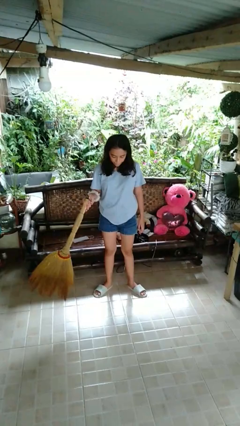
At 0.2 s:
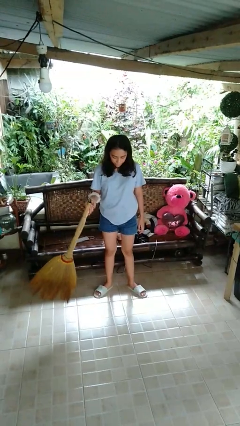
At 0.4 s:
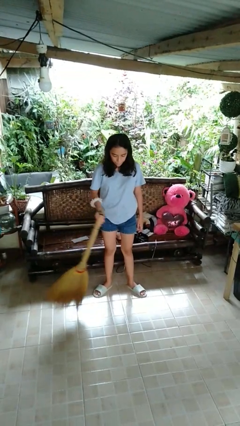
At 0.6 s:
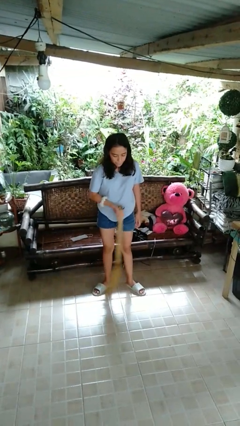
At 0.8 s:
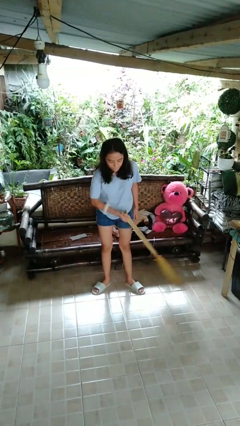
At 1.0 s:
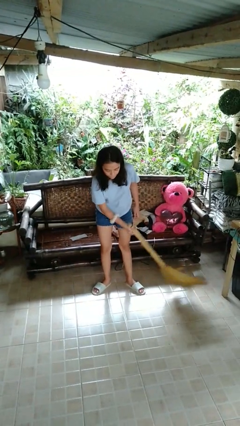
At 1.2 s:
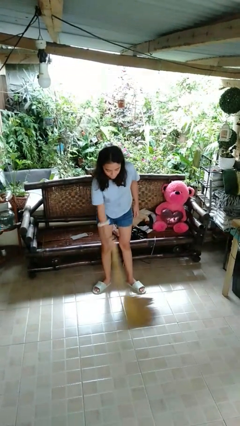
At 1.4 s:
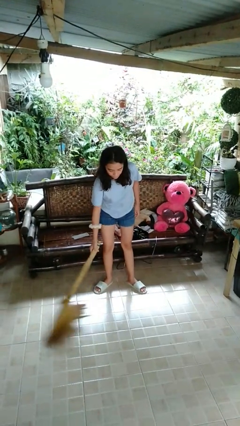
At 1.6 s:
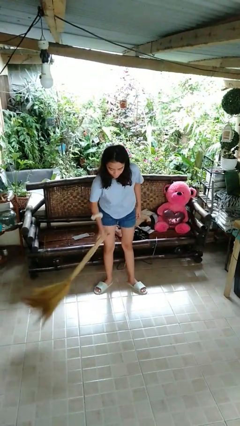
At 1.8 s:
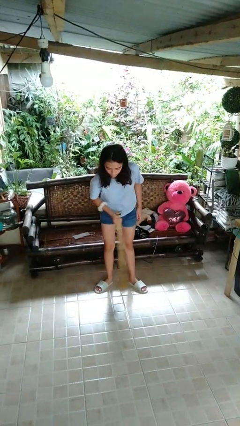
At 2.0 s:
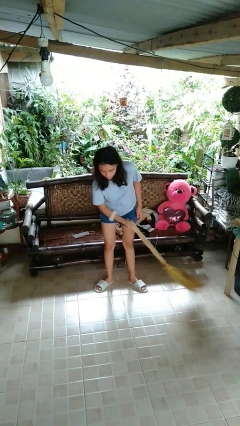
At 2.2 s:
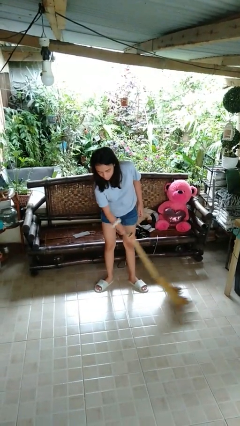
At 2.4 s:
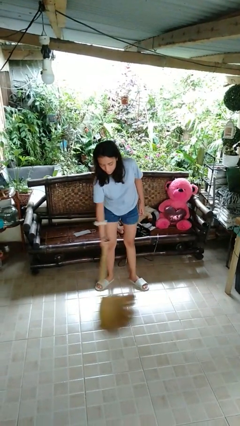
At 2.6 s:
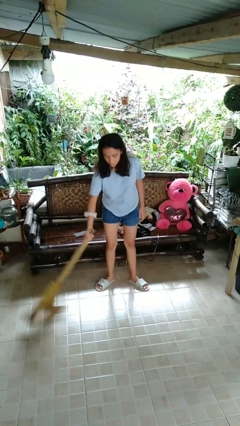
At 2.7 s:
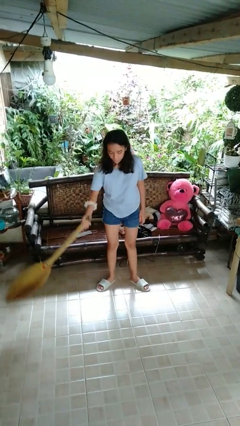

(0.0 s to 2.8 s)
person sweeps floor

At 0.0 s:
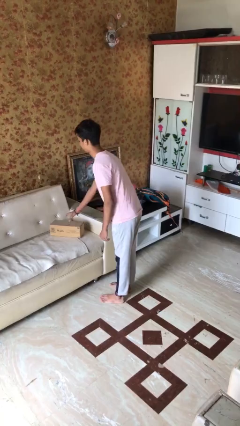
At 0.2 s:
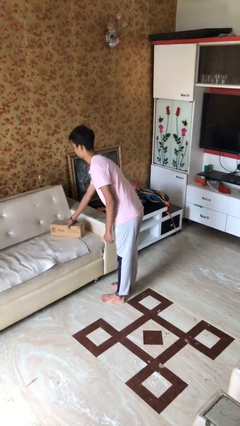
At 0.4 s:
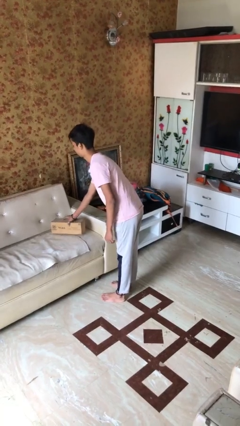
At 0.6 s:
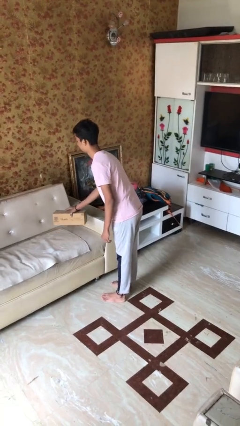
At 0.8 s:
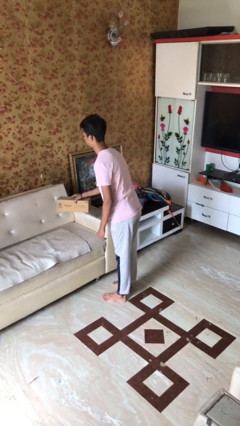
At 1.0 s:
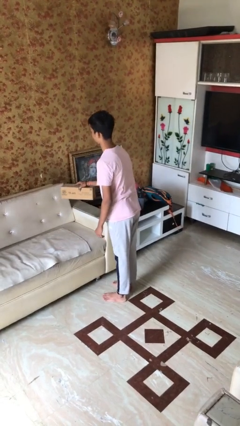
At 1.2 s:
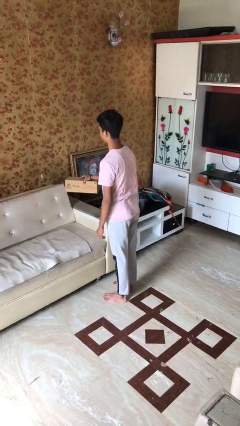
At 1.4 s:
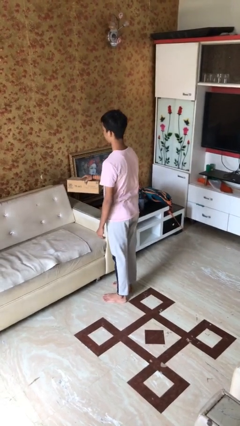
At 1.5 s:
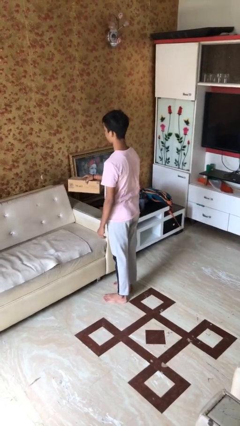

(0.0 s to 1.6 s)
person picks up object from couch

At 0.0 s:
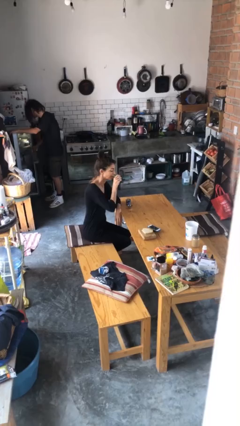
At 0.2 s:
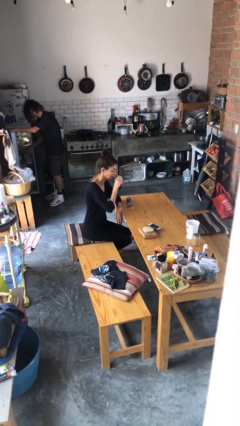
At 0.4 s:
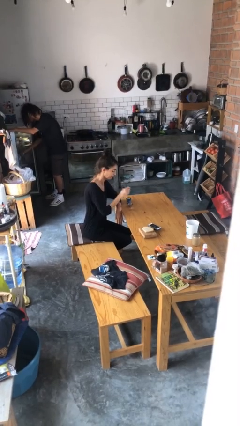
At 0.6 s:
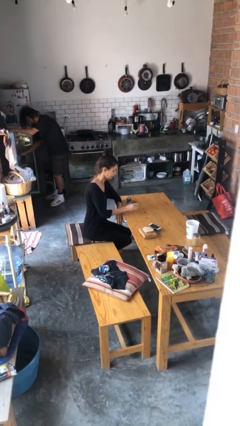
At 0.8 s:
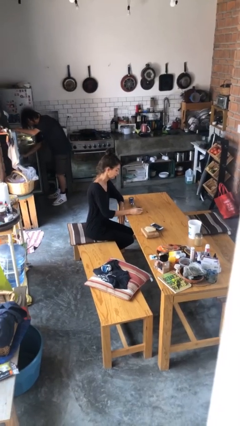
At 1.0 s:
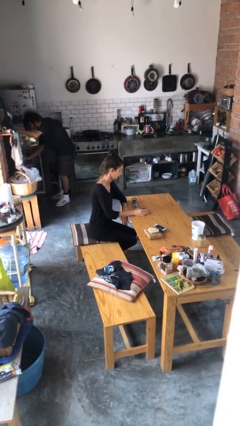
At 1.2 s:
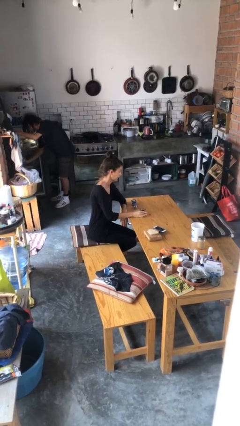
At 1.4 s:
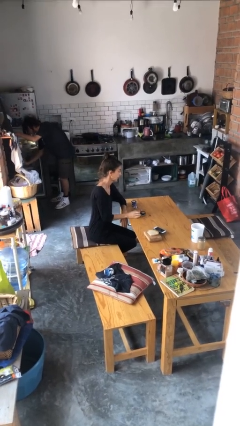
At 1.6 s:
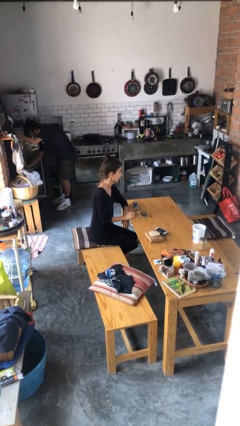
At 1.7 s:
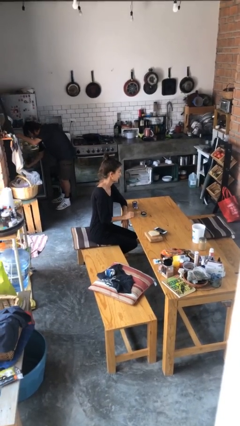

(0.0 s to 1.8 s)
person puts down object on table

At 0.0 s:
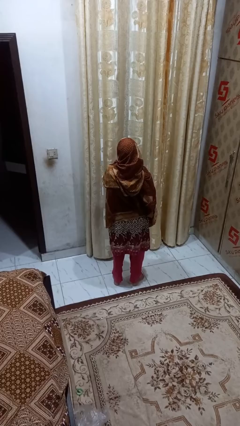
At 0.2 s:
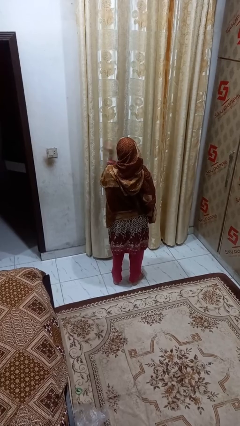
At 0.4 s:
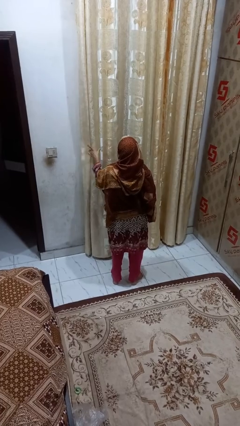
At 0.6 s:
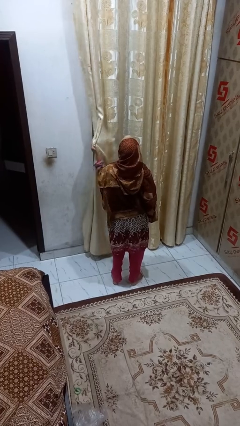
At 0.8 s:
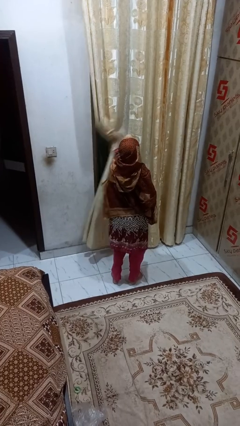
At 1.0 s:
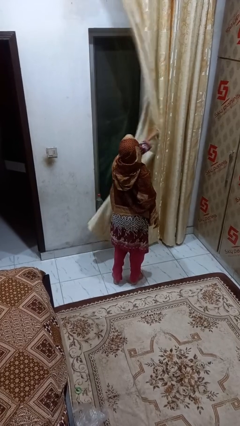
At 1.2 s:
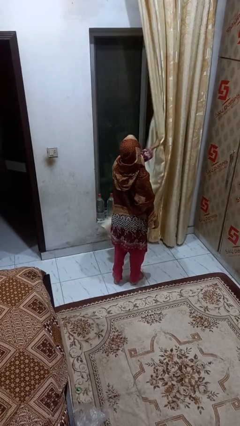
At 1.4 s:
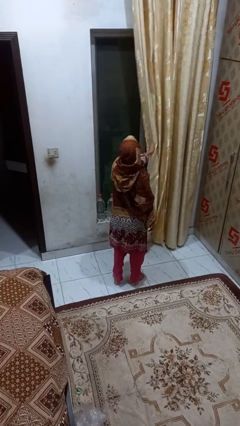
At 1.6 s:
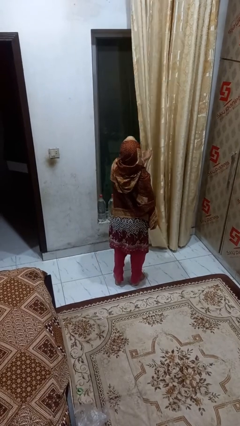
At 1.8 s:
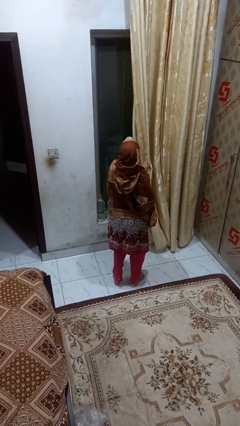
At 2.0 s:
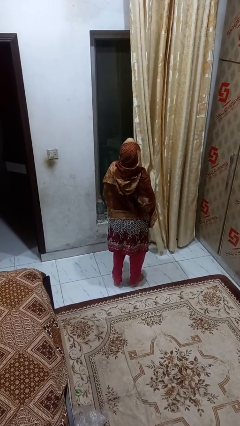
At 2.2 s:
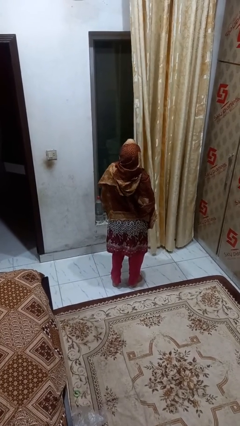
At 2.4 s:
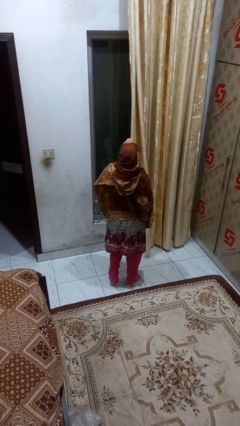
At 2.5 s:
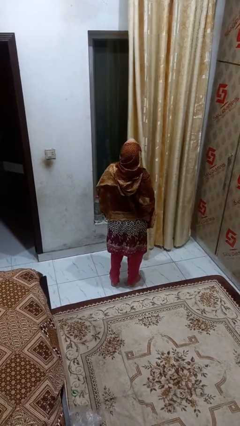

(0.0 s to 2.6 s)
person opens curtains

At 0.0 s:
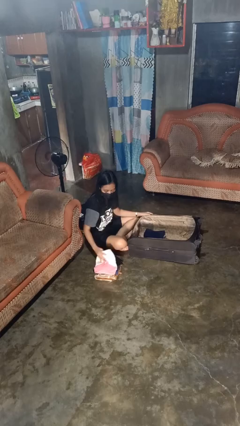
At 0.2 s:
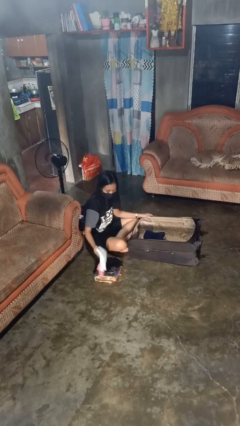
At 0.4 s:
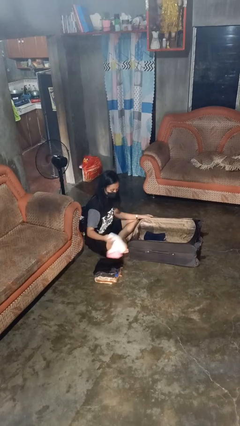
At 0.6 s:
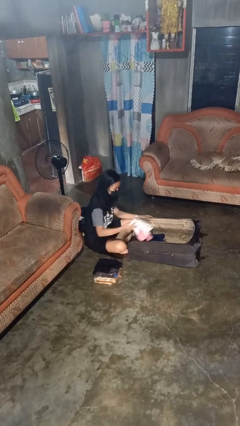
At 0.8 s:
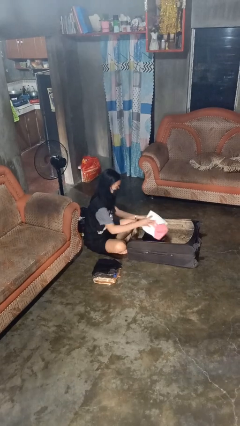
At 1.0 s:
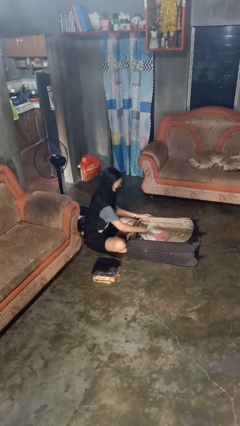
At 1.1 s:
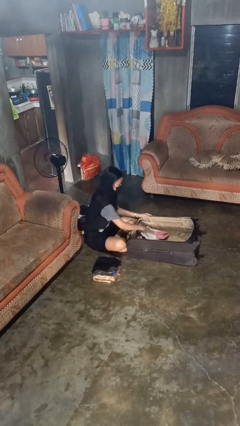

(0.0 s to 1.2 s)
person loads clothes into suitcase

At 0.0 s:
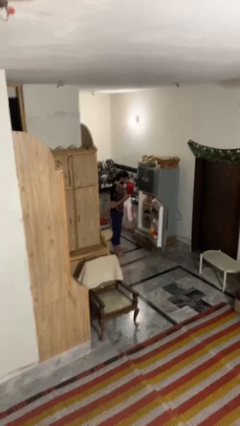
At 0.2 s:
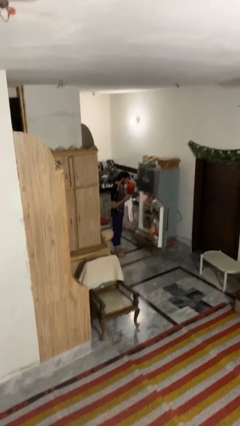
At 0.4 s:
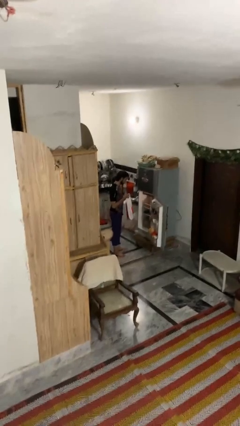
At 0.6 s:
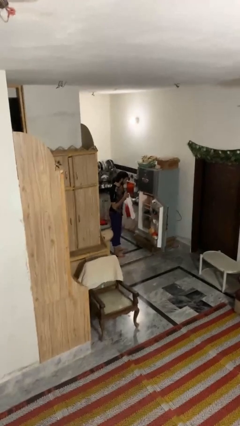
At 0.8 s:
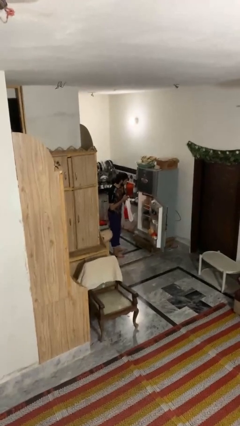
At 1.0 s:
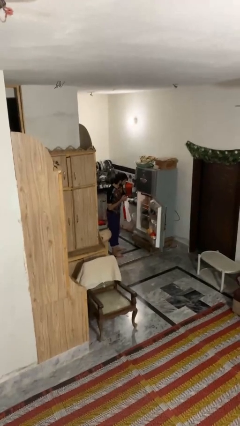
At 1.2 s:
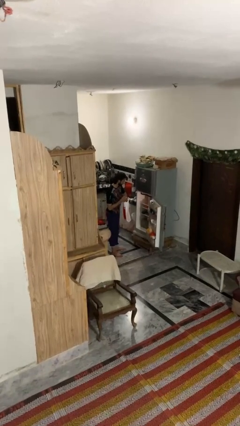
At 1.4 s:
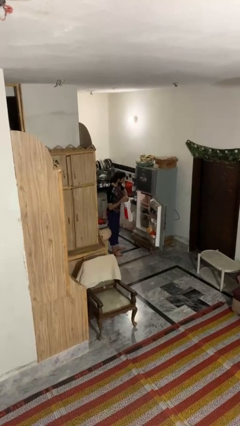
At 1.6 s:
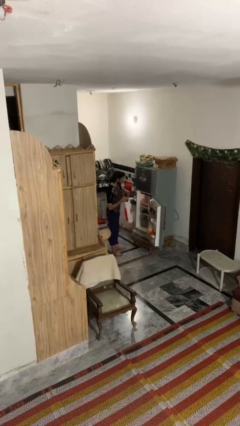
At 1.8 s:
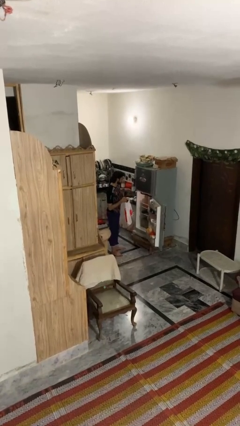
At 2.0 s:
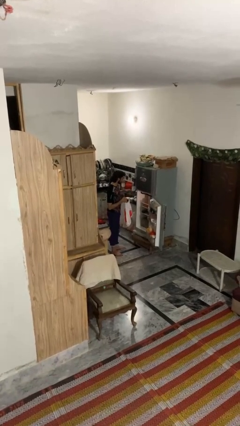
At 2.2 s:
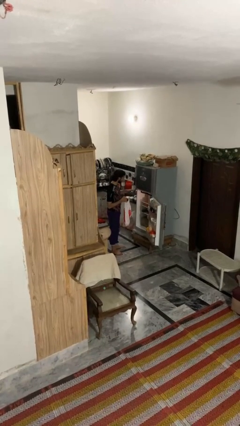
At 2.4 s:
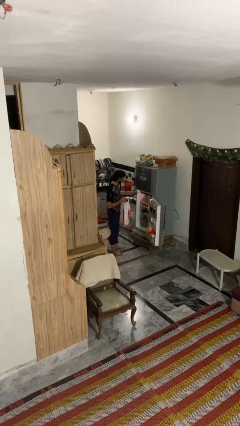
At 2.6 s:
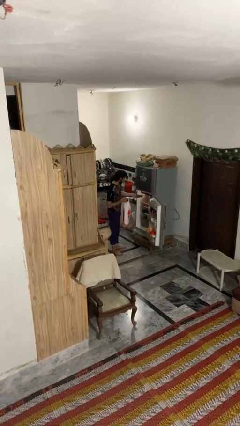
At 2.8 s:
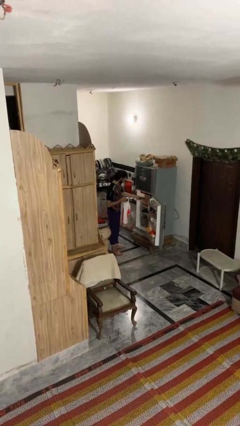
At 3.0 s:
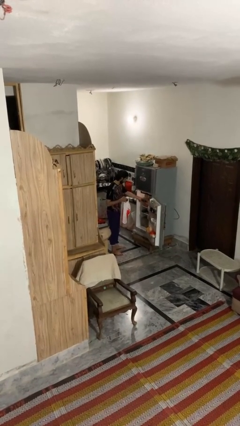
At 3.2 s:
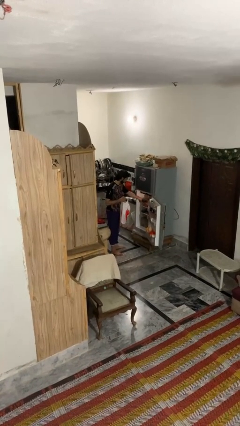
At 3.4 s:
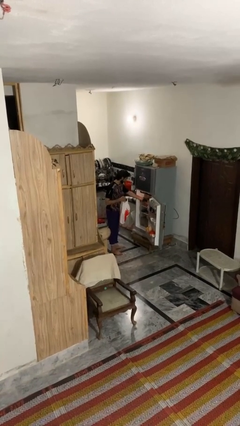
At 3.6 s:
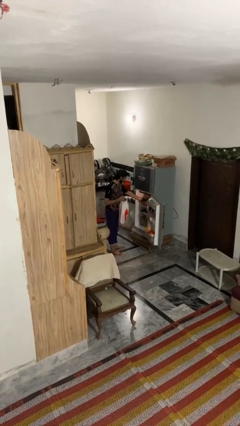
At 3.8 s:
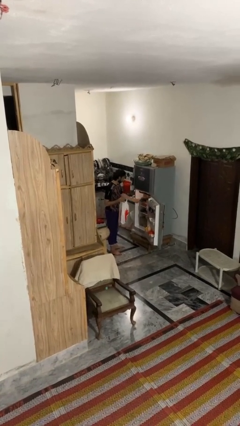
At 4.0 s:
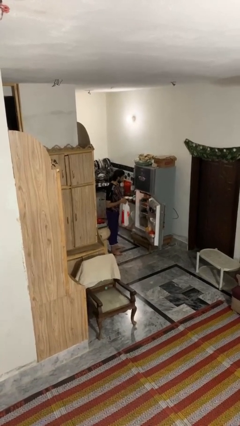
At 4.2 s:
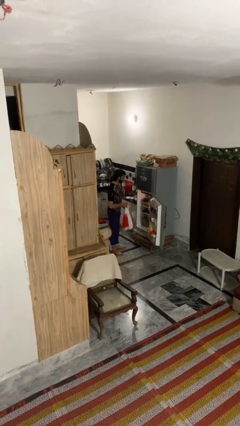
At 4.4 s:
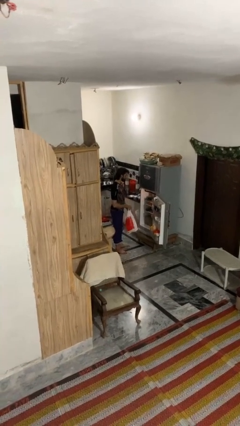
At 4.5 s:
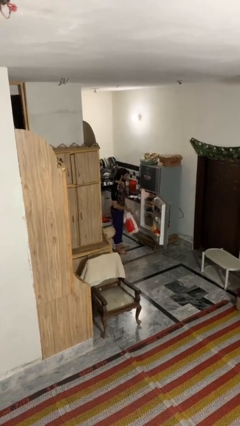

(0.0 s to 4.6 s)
person loads groceries into refrigerator

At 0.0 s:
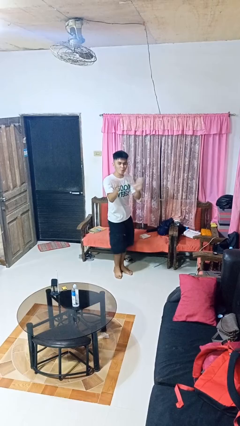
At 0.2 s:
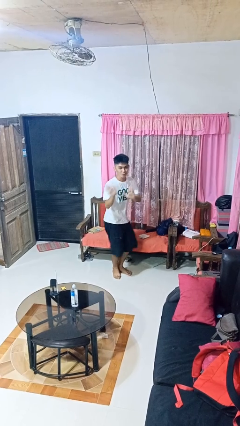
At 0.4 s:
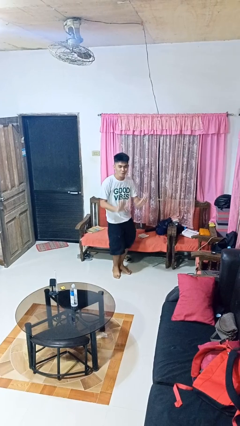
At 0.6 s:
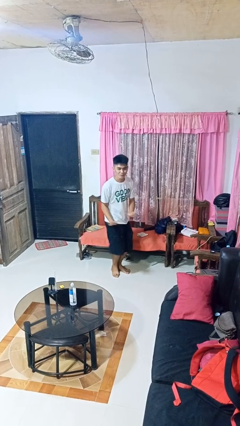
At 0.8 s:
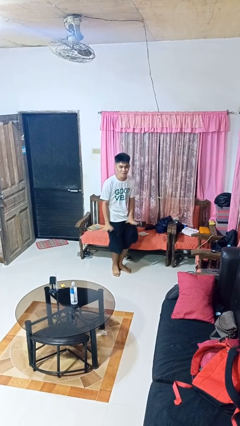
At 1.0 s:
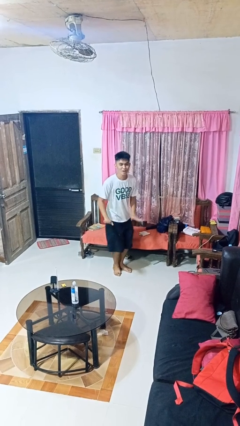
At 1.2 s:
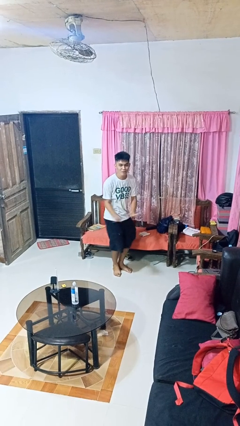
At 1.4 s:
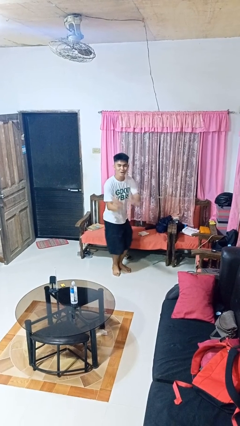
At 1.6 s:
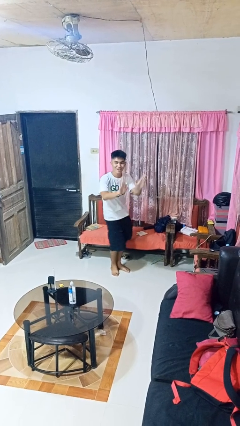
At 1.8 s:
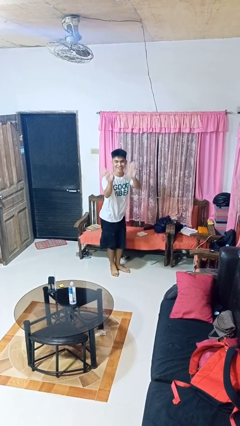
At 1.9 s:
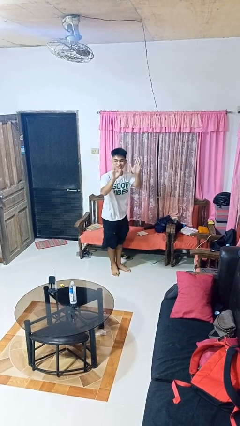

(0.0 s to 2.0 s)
person dances in place

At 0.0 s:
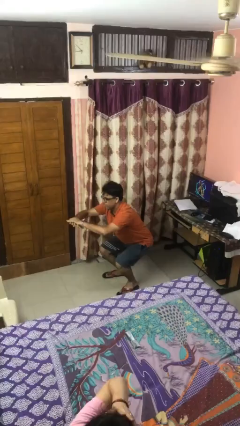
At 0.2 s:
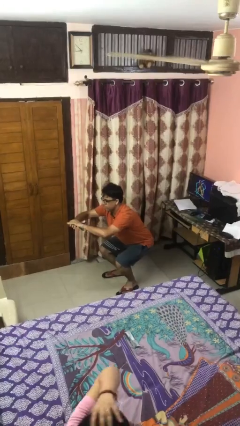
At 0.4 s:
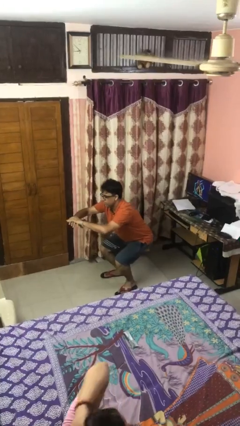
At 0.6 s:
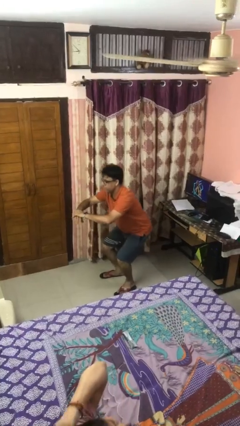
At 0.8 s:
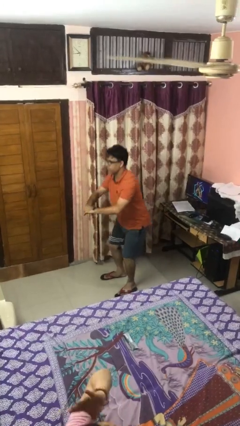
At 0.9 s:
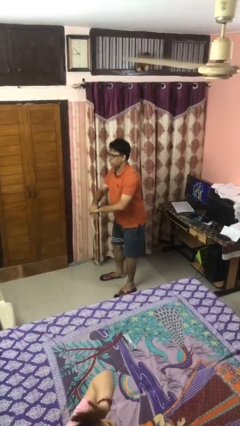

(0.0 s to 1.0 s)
person stands up
